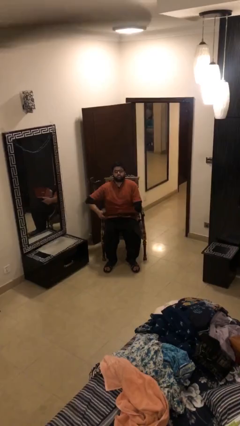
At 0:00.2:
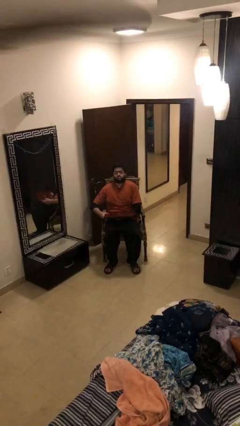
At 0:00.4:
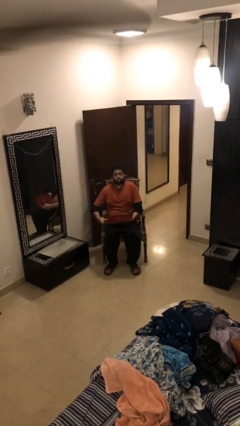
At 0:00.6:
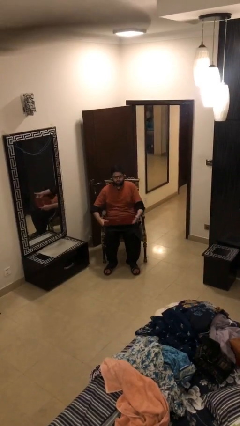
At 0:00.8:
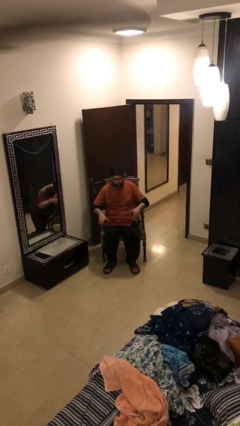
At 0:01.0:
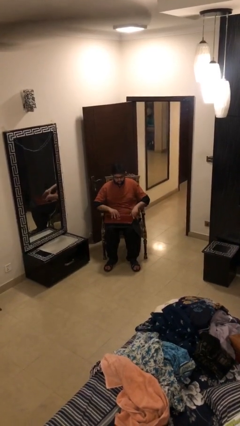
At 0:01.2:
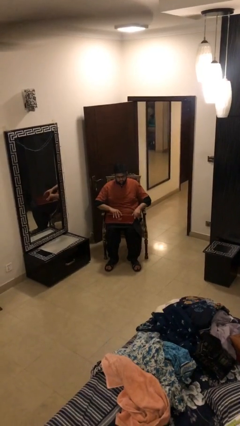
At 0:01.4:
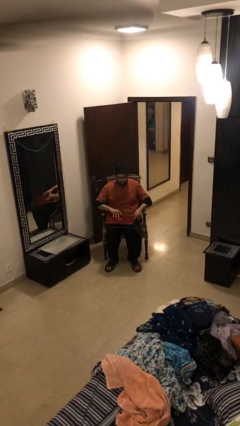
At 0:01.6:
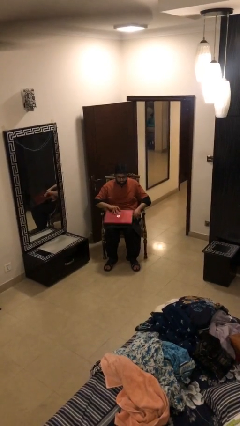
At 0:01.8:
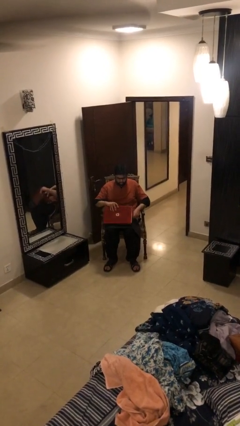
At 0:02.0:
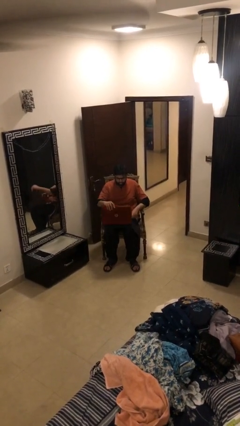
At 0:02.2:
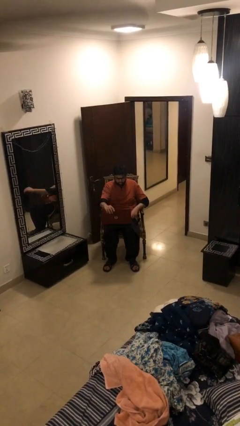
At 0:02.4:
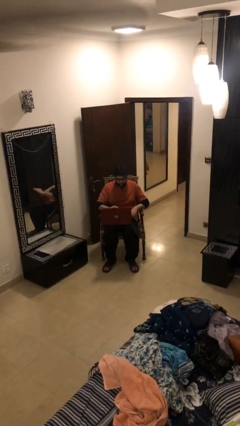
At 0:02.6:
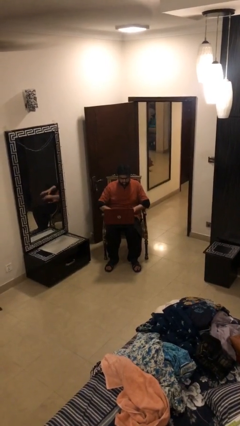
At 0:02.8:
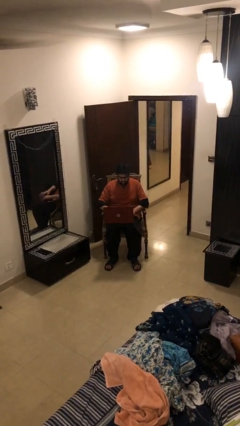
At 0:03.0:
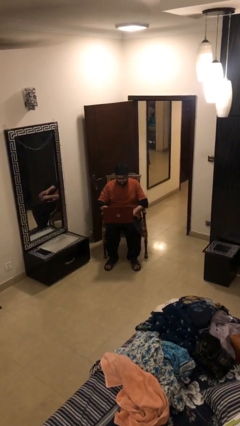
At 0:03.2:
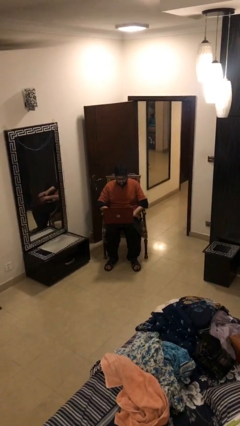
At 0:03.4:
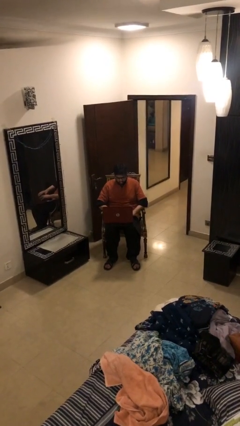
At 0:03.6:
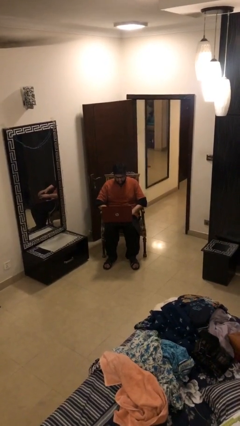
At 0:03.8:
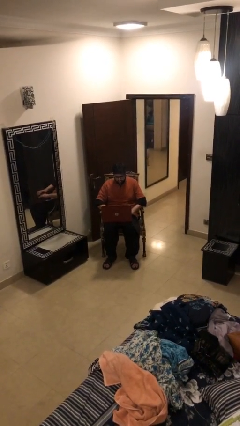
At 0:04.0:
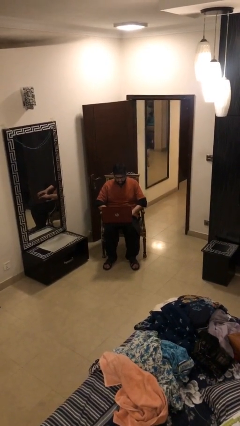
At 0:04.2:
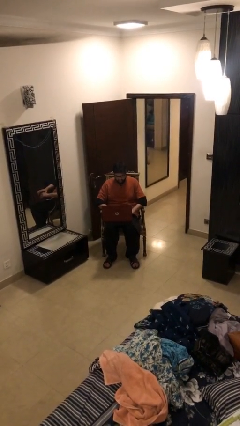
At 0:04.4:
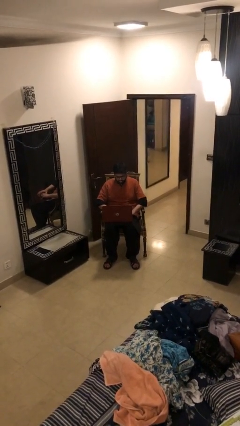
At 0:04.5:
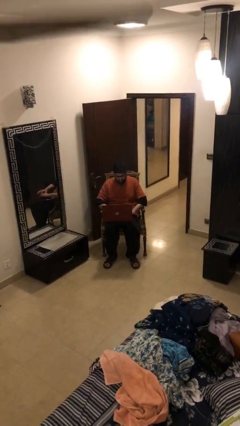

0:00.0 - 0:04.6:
person interacts with laptop

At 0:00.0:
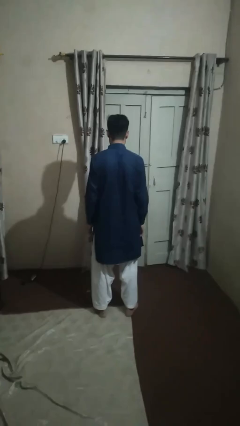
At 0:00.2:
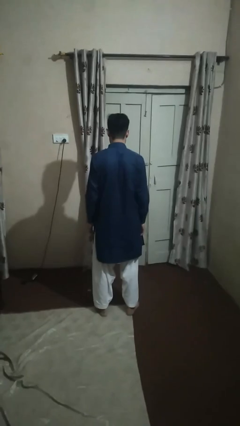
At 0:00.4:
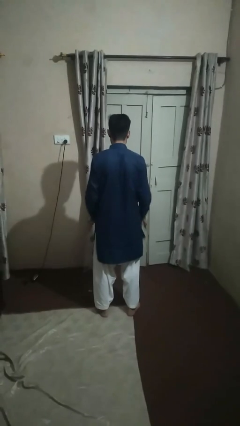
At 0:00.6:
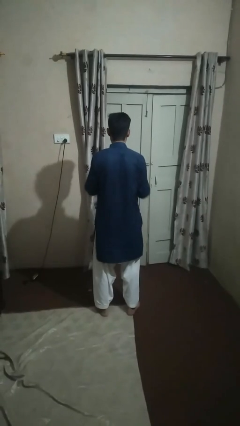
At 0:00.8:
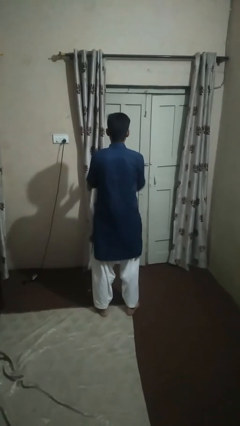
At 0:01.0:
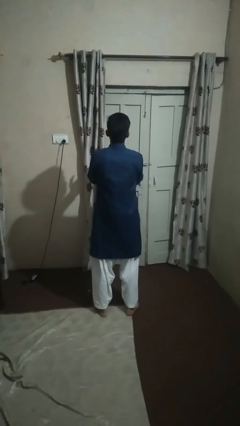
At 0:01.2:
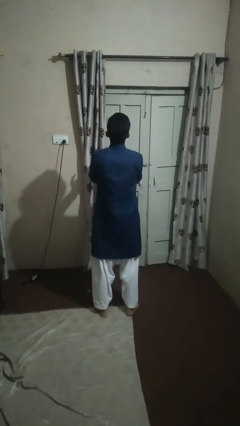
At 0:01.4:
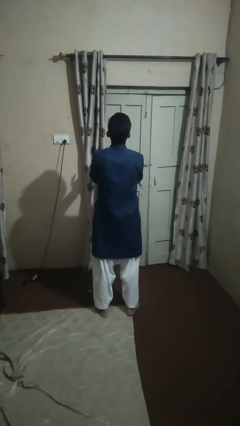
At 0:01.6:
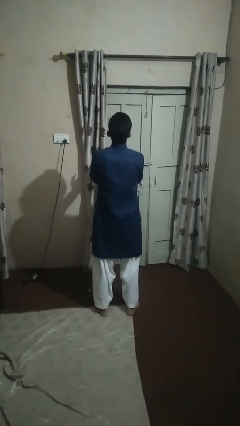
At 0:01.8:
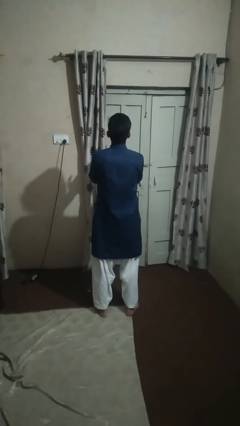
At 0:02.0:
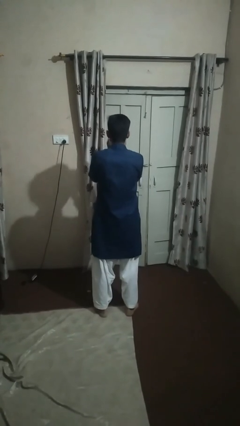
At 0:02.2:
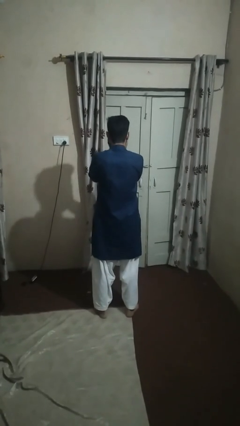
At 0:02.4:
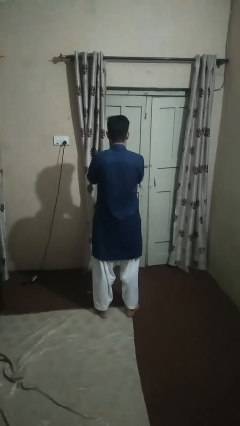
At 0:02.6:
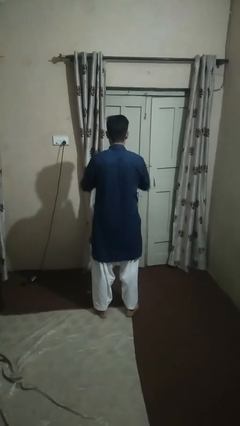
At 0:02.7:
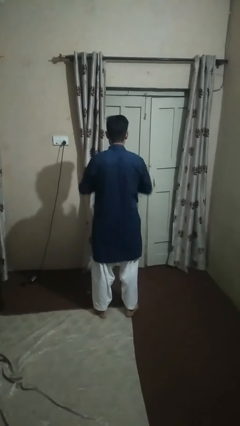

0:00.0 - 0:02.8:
person prays

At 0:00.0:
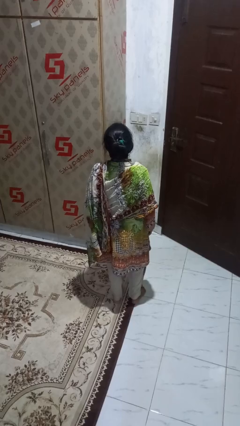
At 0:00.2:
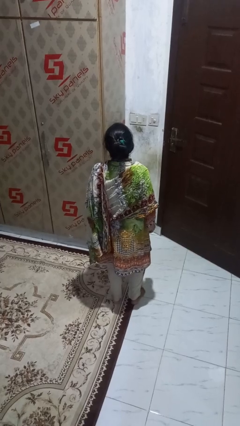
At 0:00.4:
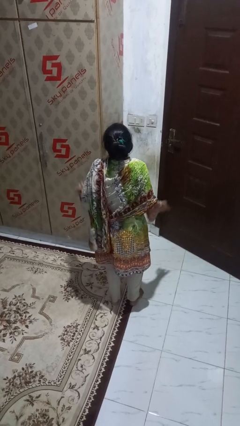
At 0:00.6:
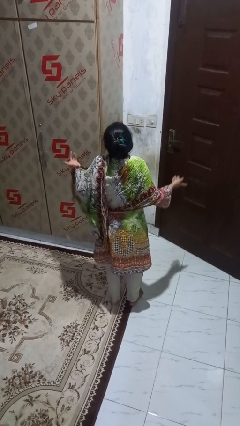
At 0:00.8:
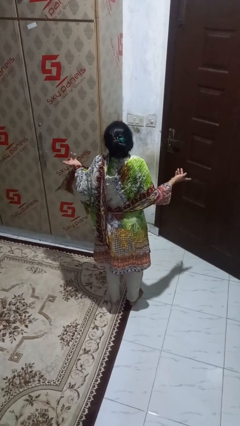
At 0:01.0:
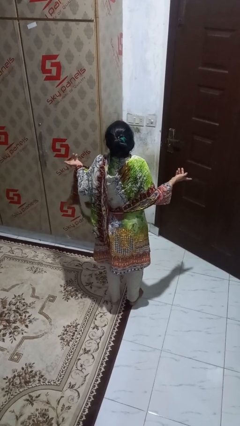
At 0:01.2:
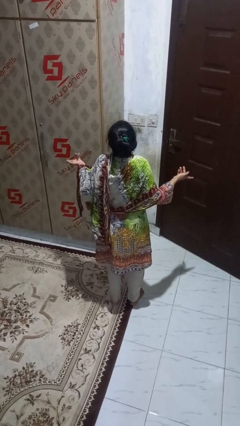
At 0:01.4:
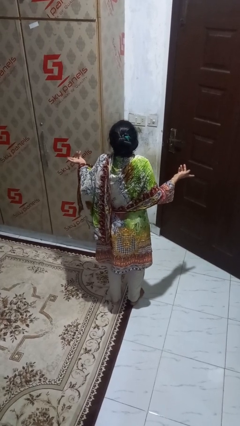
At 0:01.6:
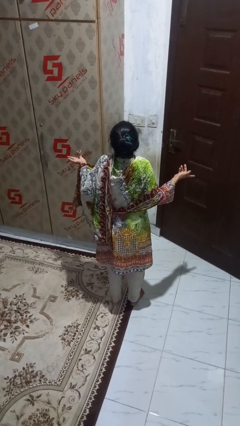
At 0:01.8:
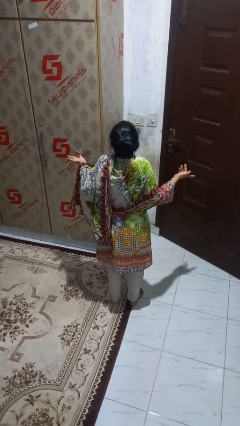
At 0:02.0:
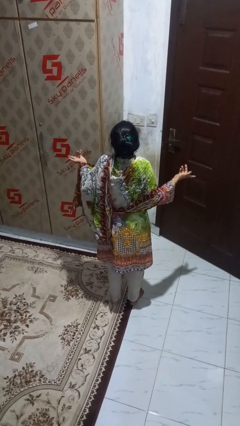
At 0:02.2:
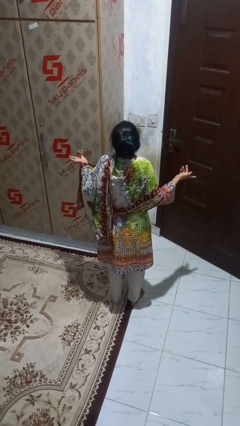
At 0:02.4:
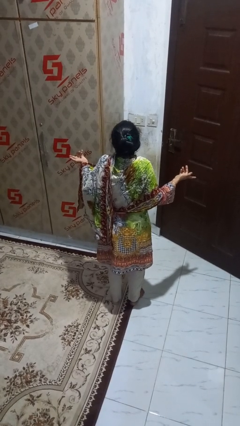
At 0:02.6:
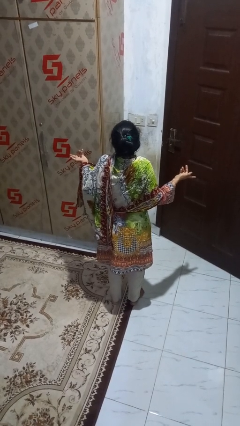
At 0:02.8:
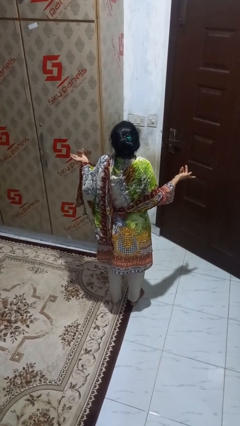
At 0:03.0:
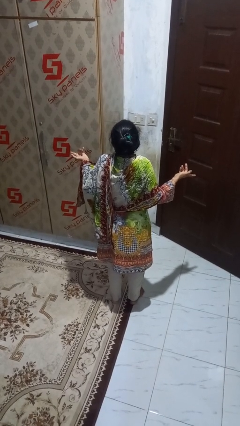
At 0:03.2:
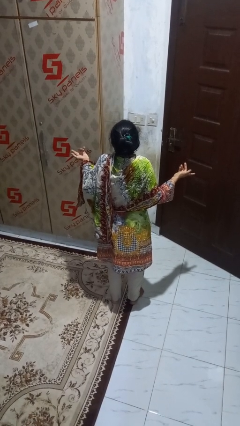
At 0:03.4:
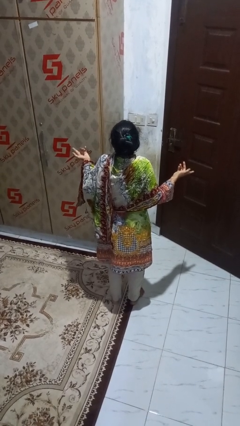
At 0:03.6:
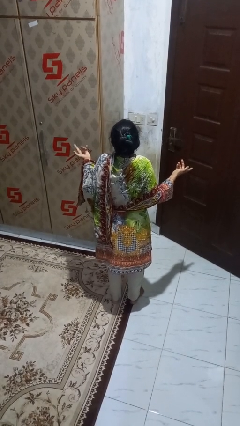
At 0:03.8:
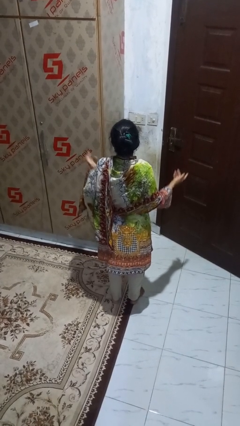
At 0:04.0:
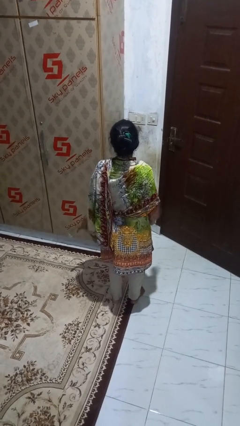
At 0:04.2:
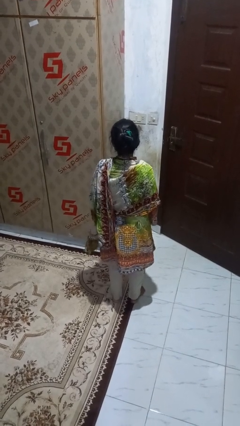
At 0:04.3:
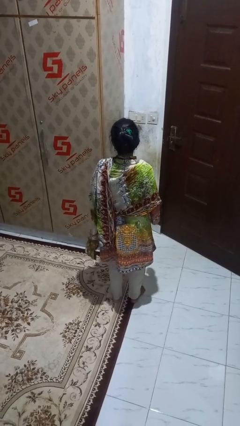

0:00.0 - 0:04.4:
person shrugs

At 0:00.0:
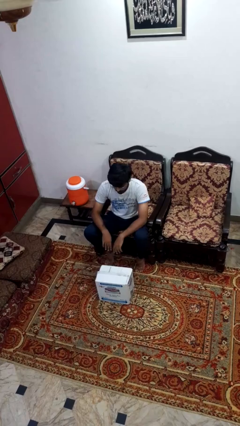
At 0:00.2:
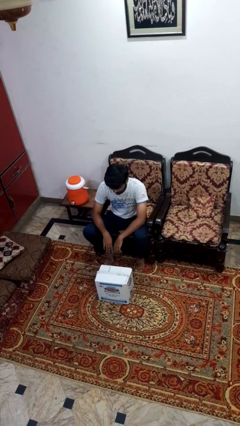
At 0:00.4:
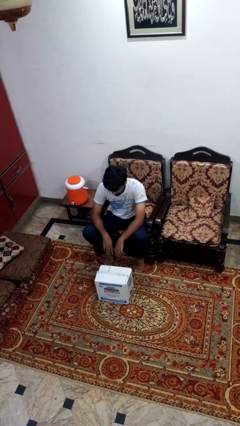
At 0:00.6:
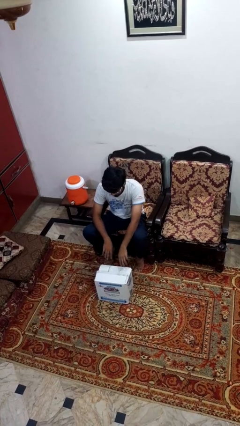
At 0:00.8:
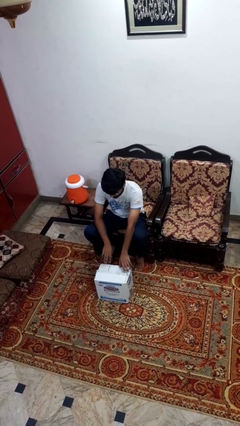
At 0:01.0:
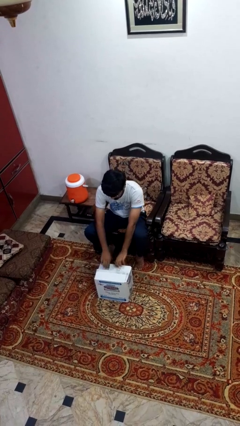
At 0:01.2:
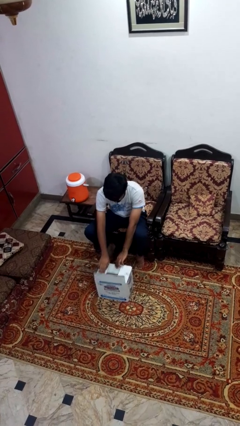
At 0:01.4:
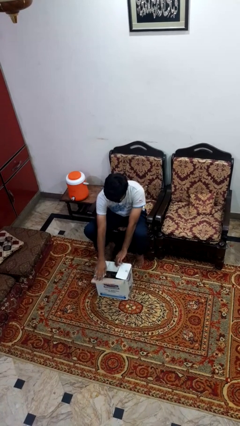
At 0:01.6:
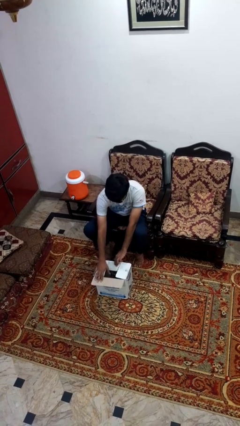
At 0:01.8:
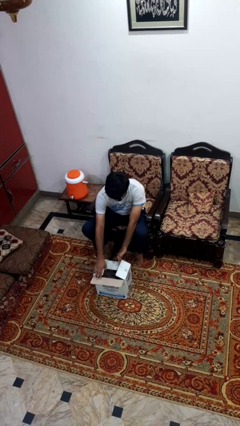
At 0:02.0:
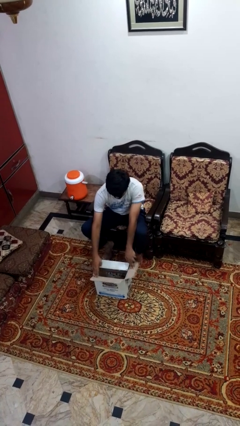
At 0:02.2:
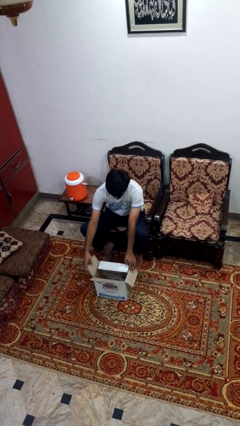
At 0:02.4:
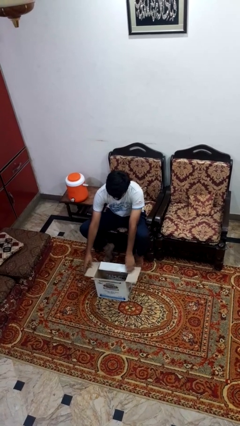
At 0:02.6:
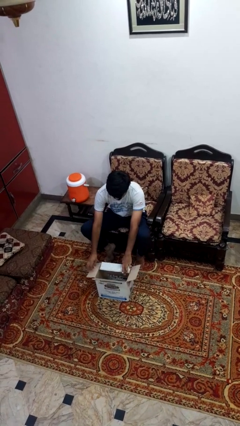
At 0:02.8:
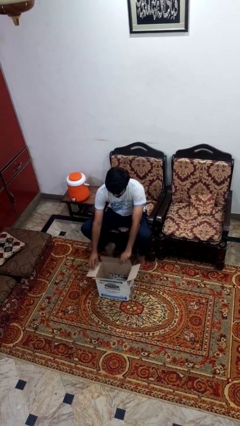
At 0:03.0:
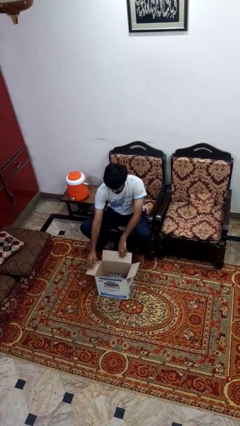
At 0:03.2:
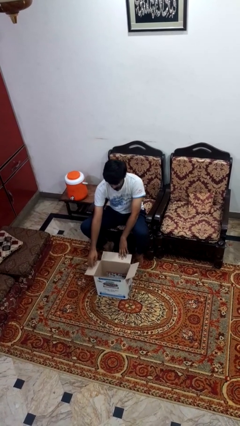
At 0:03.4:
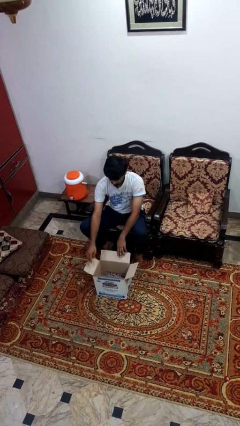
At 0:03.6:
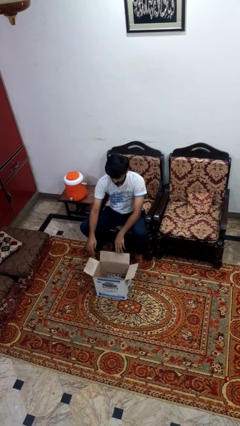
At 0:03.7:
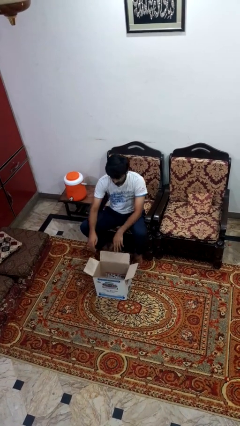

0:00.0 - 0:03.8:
person opens box

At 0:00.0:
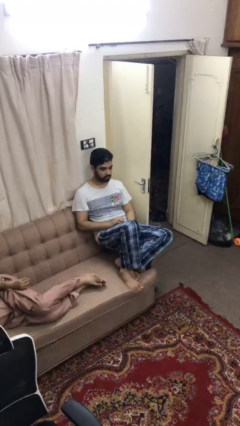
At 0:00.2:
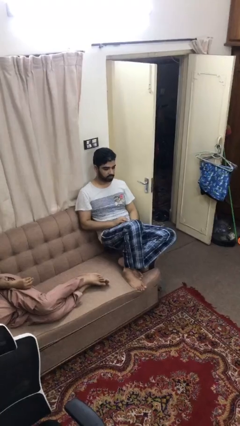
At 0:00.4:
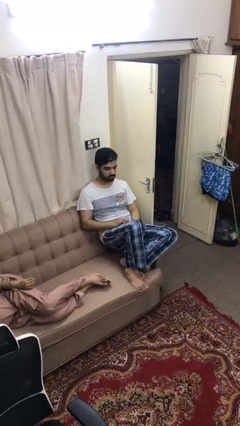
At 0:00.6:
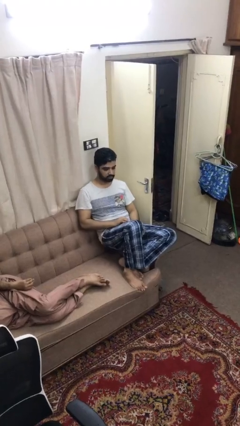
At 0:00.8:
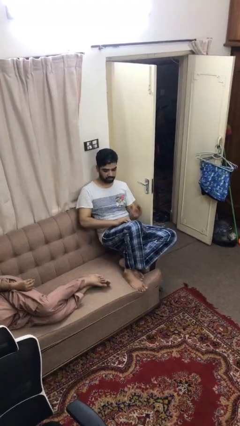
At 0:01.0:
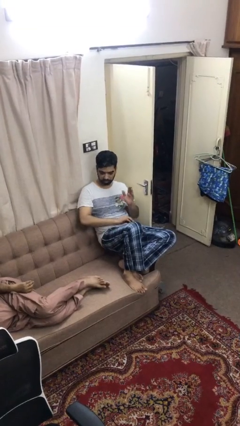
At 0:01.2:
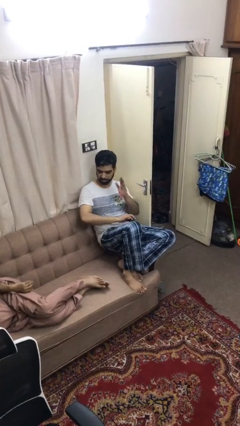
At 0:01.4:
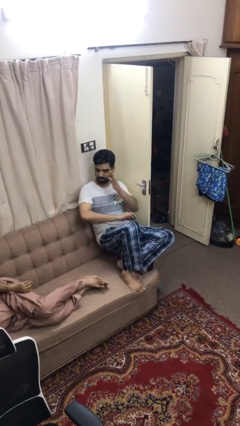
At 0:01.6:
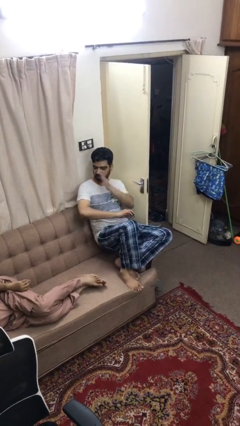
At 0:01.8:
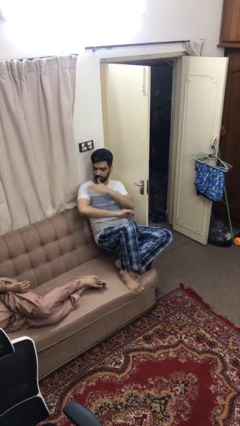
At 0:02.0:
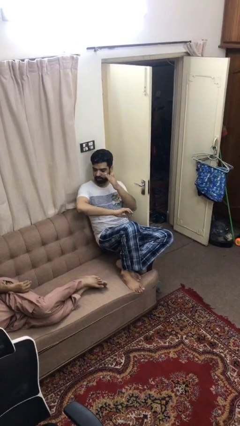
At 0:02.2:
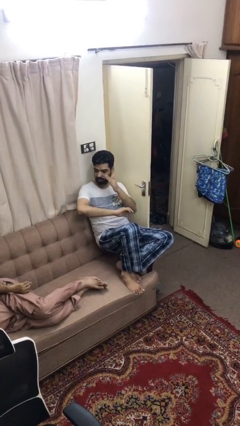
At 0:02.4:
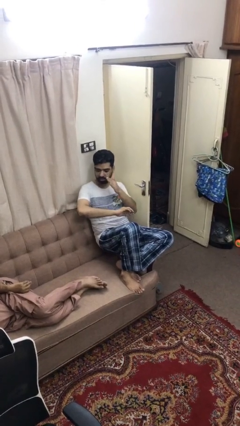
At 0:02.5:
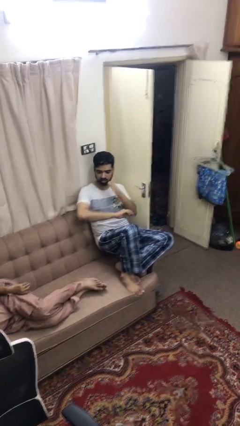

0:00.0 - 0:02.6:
person swats bug
